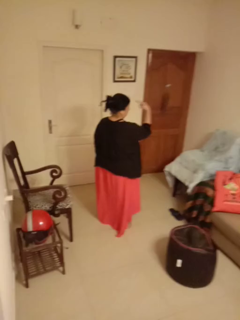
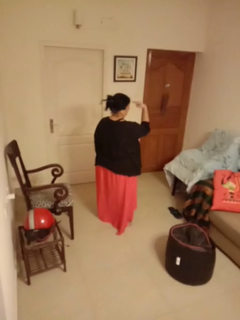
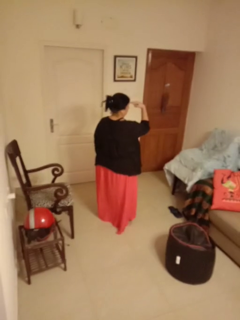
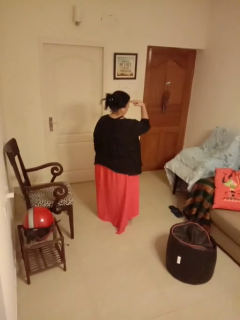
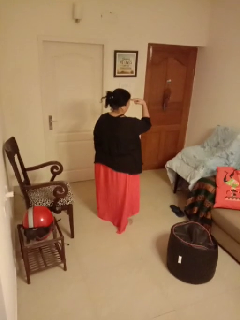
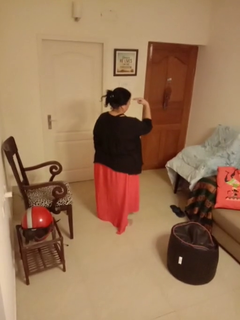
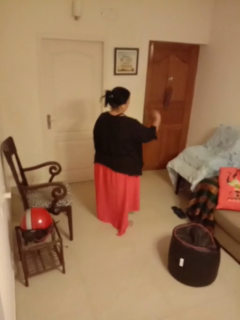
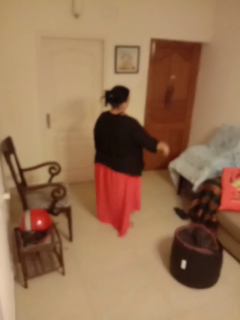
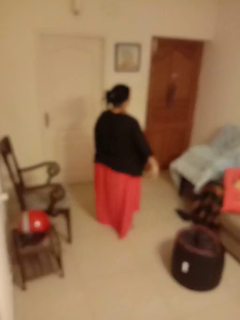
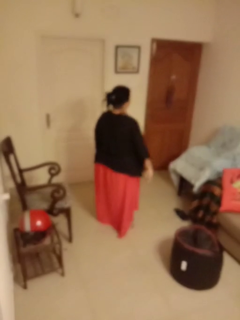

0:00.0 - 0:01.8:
person gestures watch closely

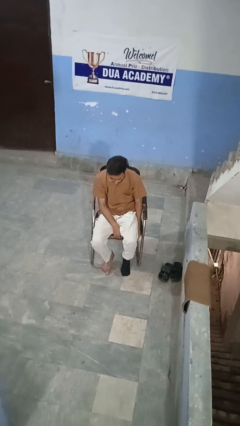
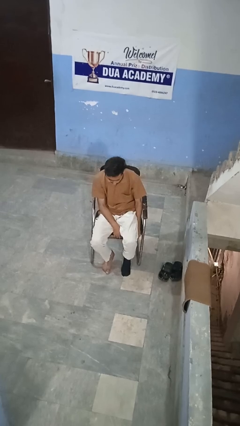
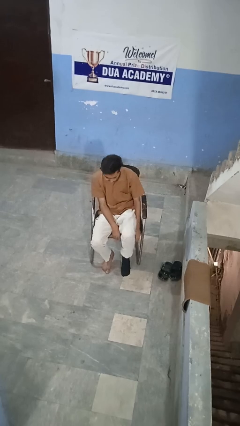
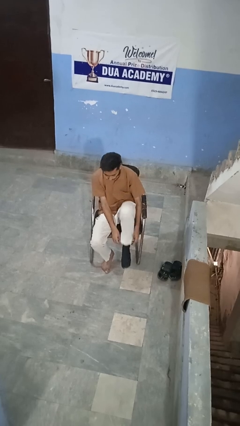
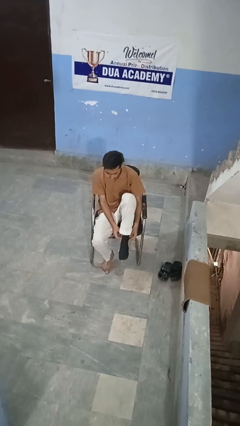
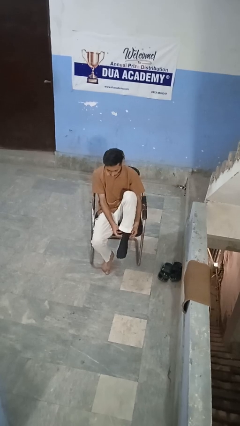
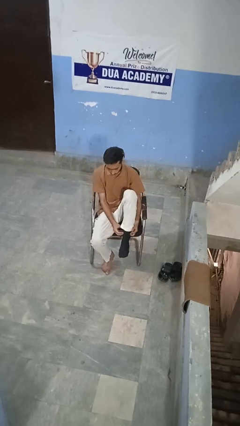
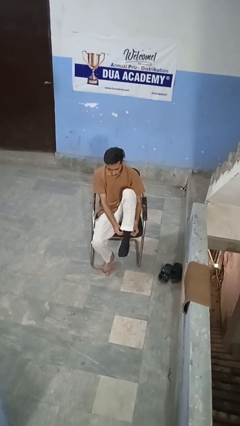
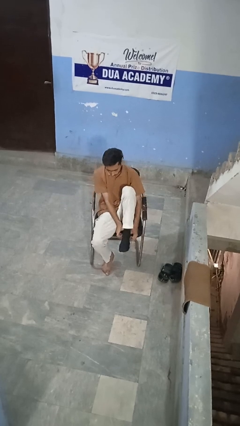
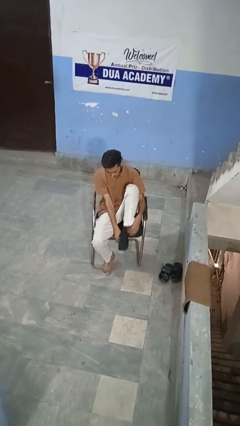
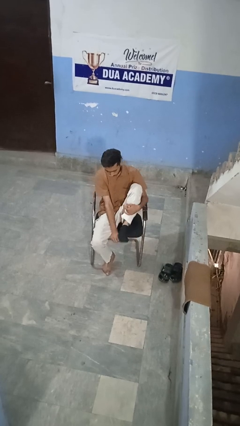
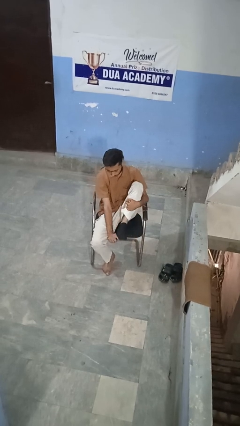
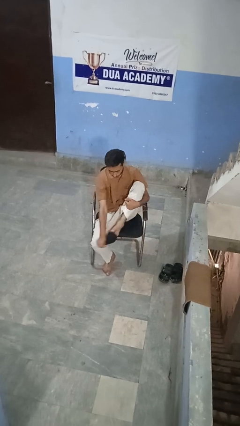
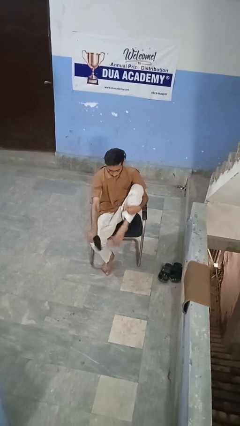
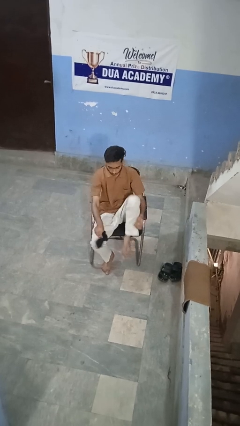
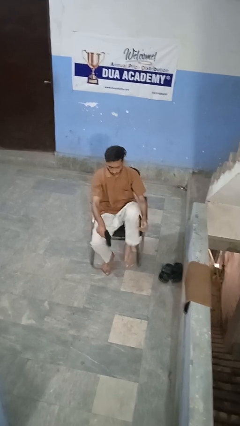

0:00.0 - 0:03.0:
person takes off socks

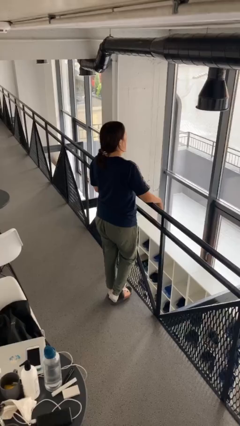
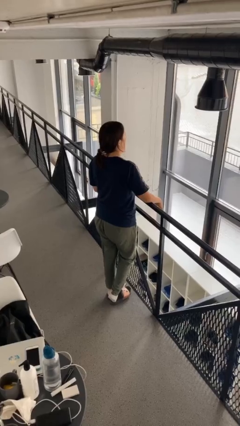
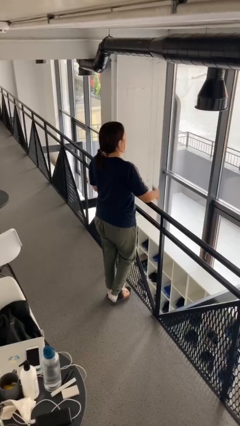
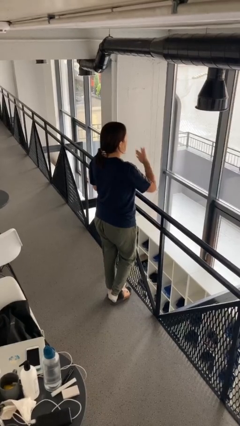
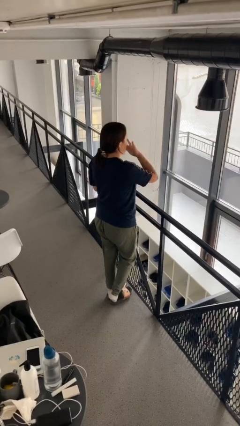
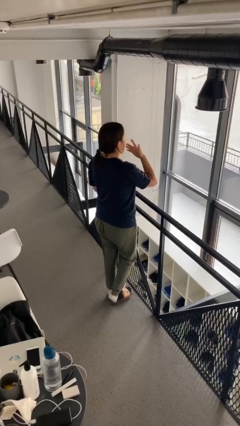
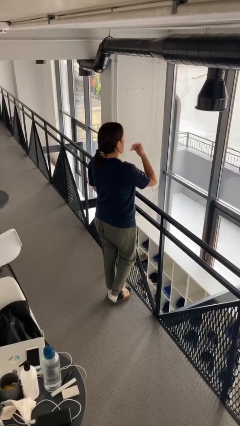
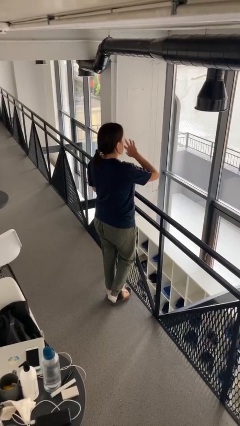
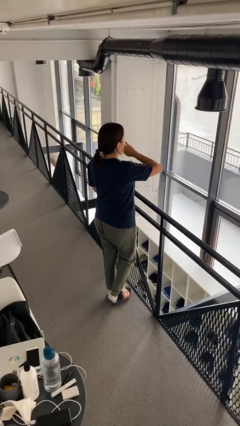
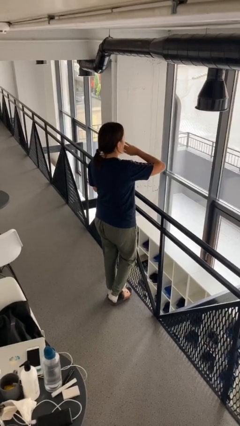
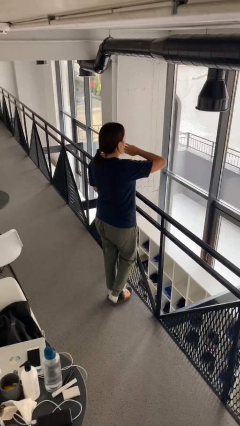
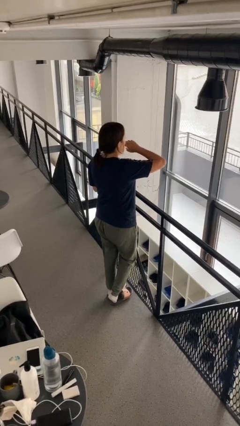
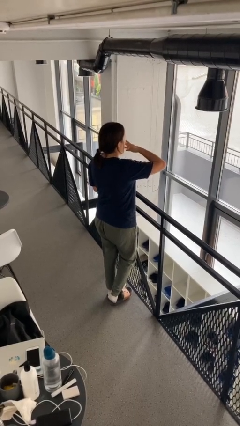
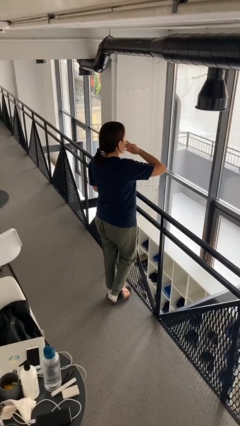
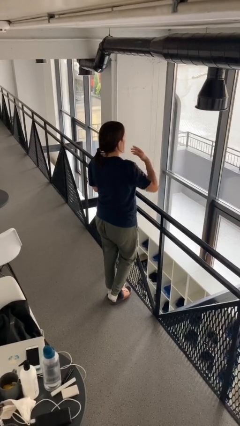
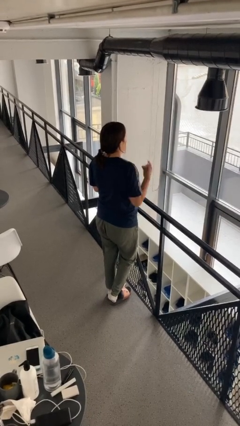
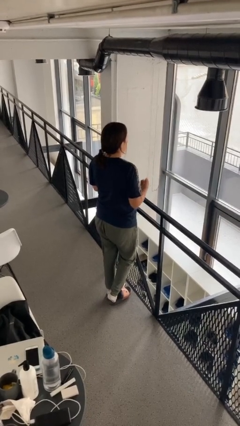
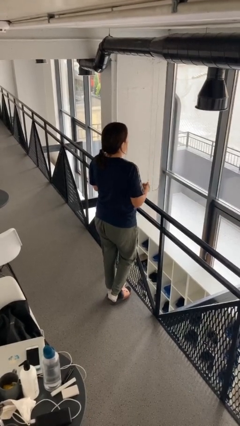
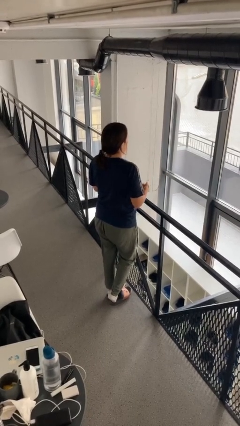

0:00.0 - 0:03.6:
person licks fingers

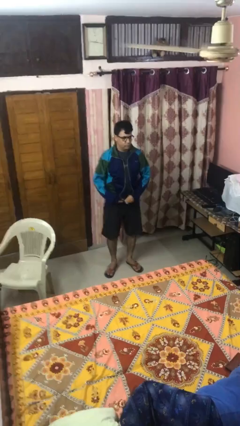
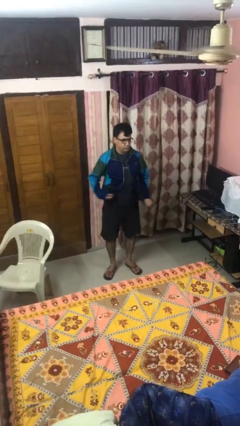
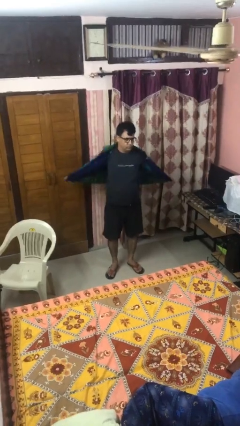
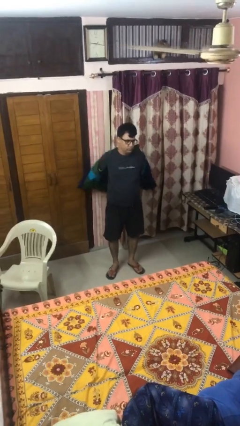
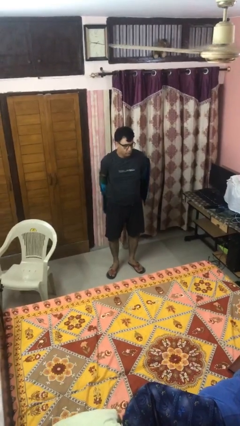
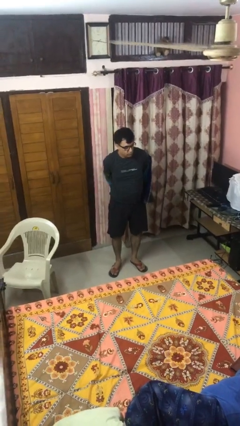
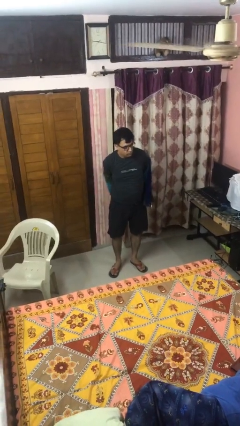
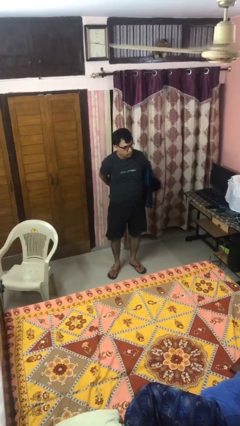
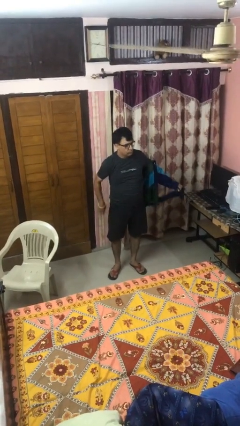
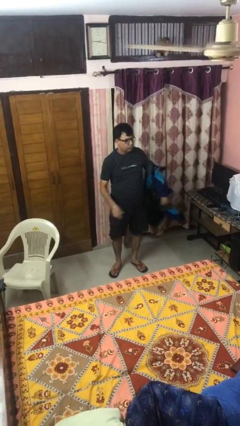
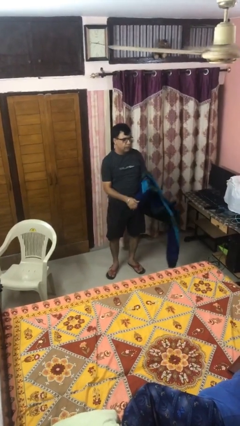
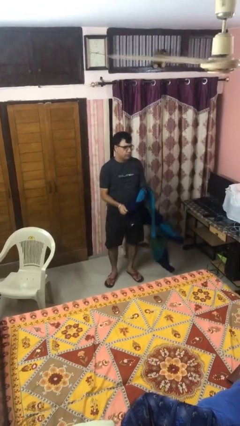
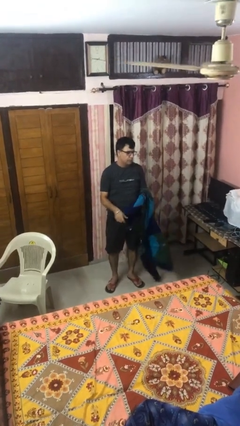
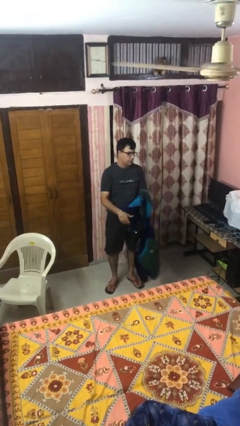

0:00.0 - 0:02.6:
person takes off jacket

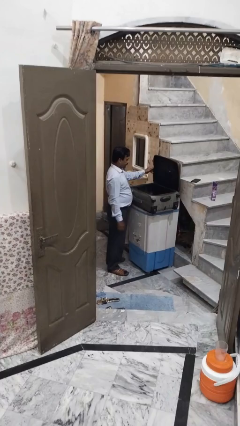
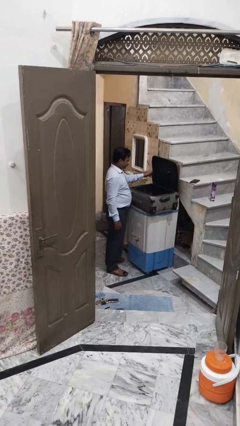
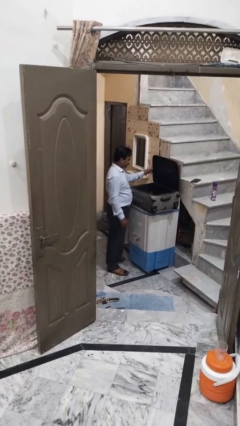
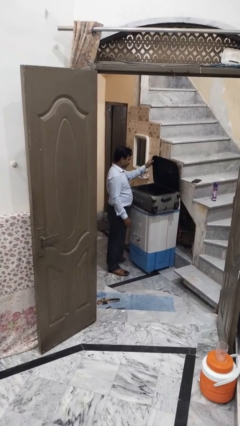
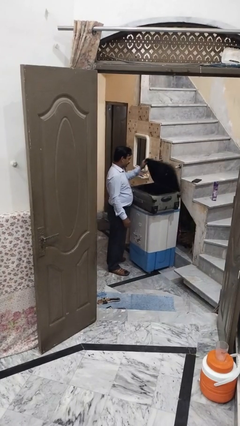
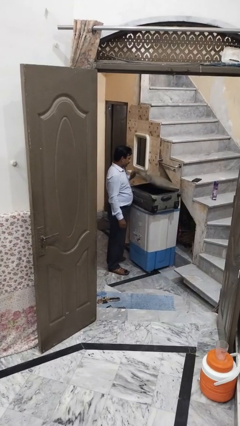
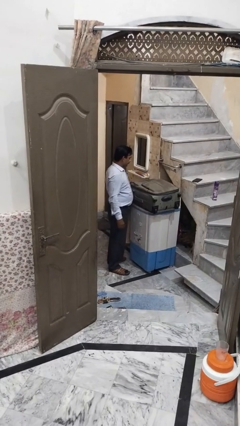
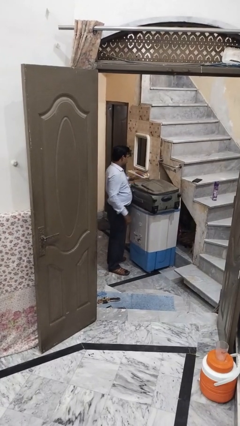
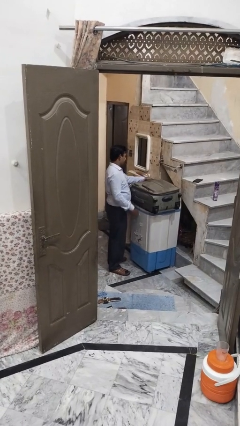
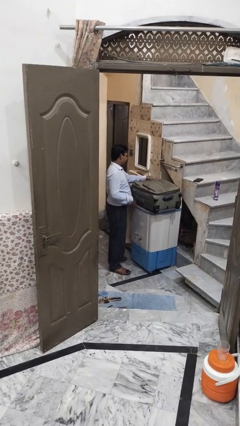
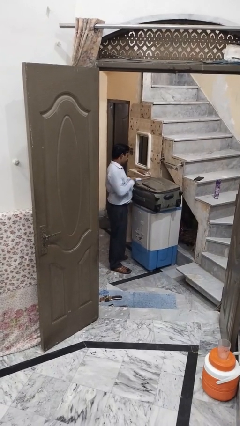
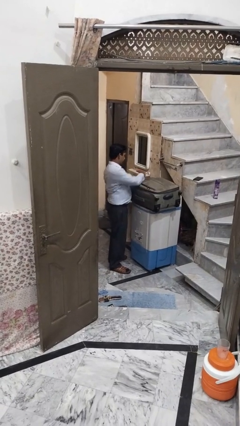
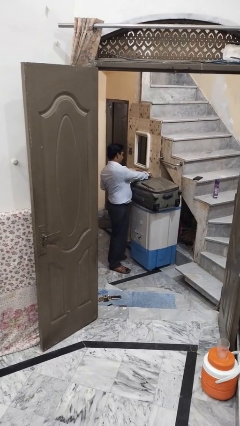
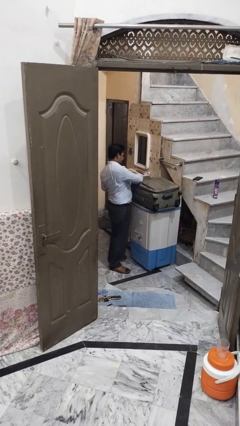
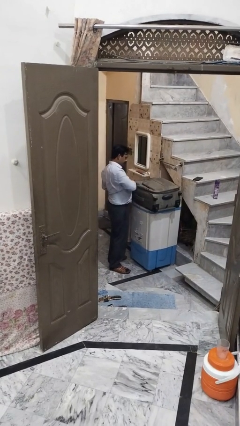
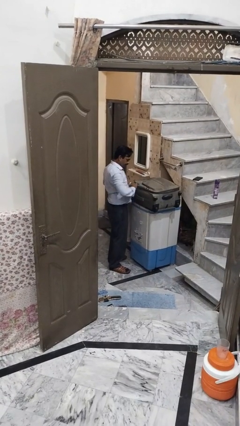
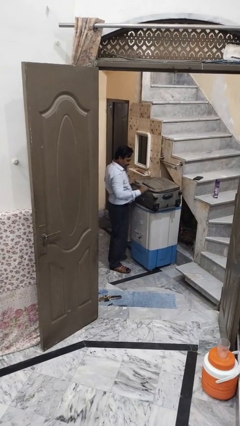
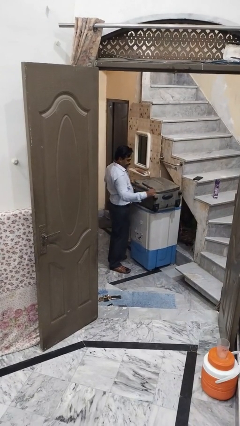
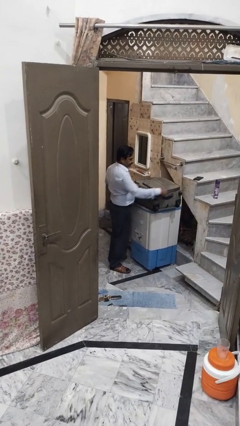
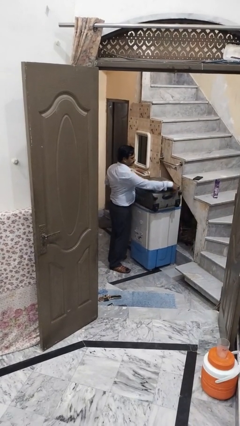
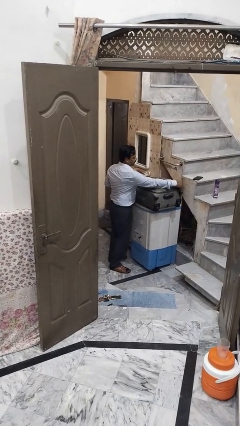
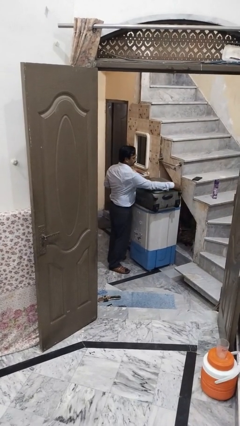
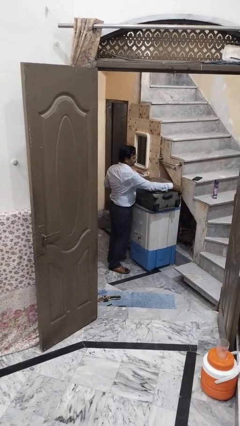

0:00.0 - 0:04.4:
person closes suitcase

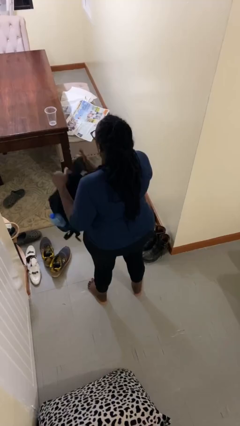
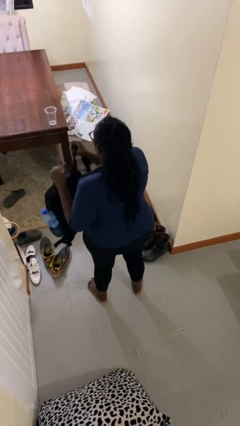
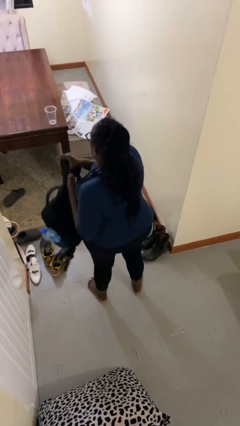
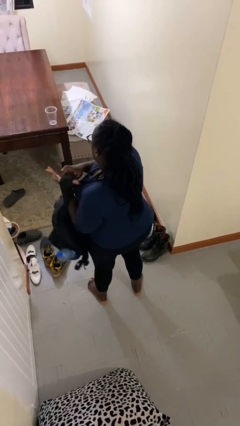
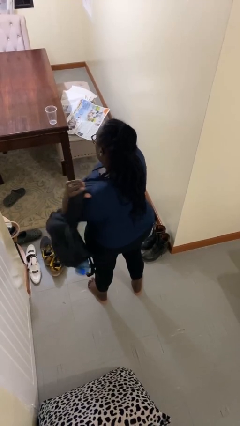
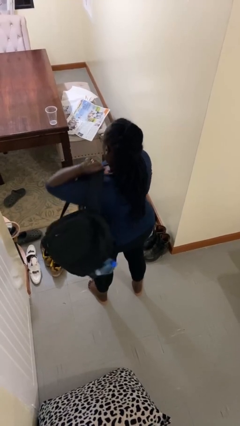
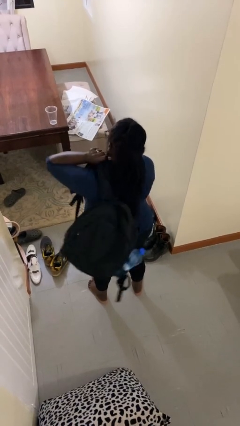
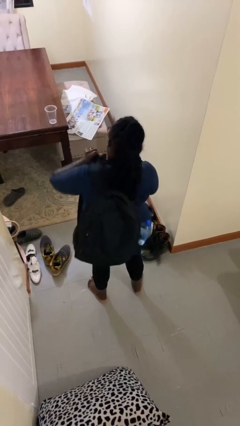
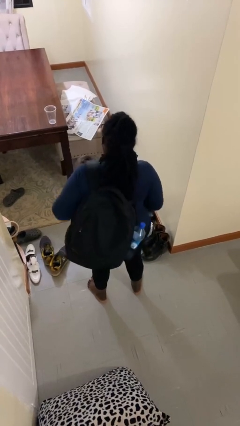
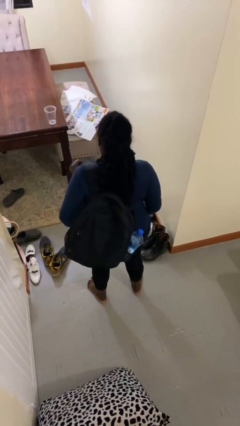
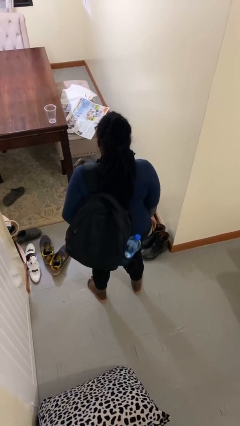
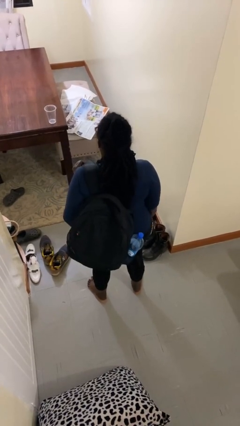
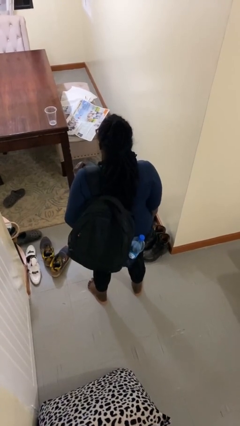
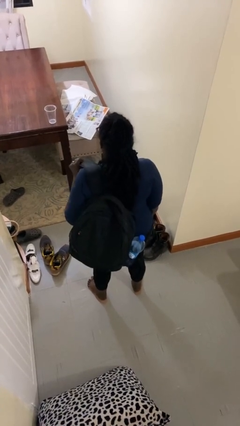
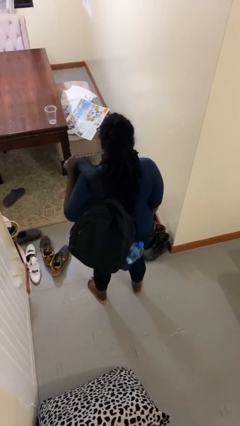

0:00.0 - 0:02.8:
person puts on backpack
